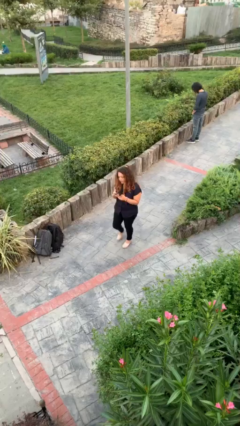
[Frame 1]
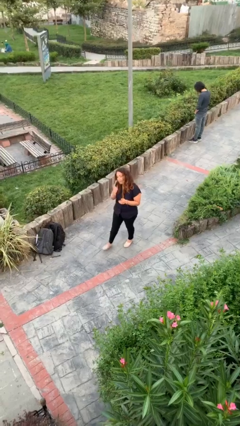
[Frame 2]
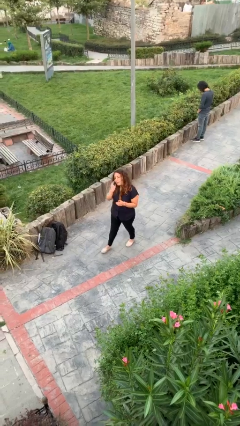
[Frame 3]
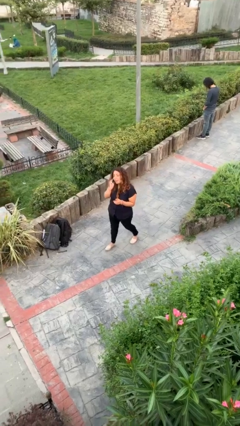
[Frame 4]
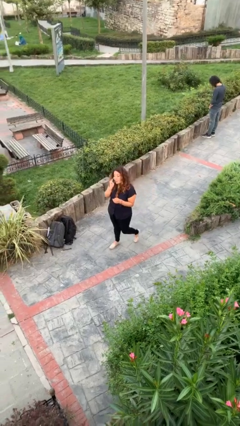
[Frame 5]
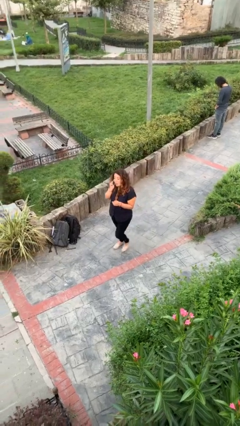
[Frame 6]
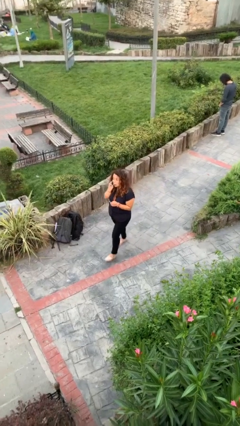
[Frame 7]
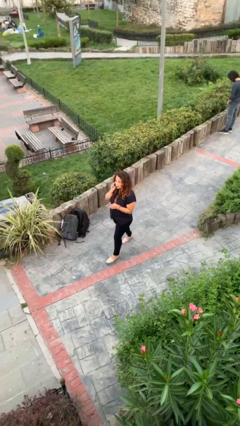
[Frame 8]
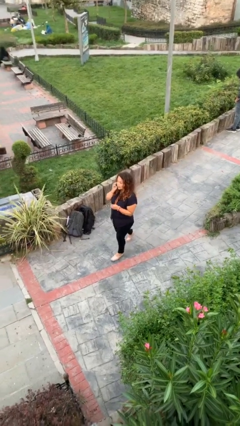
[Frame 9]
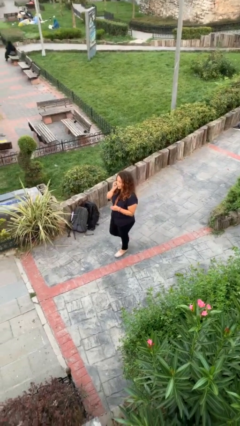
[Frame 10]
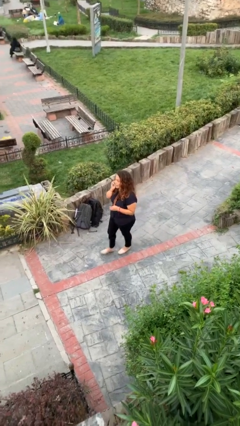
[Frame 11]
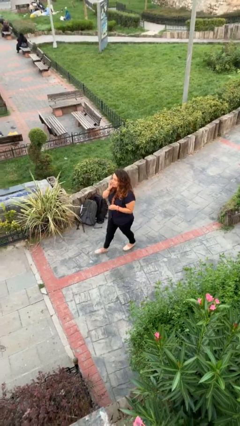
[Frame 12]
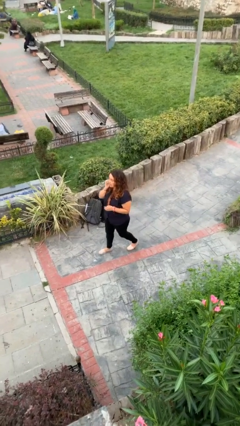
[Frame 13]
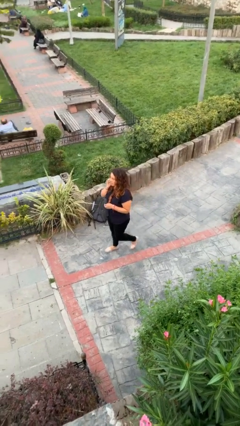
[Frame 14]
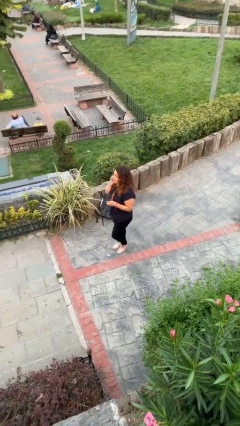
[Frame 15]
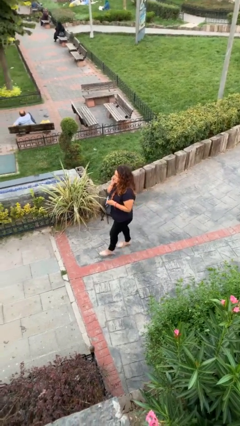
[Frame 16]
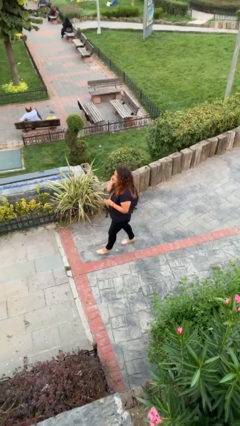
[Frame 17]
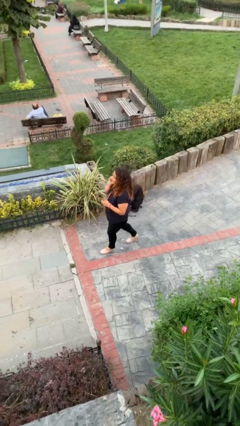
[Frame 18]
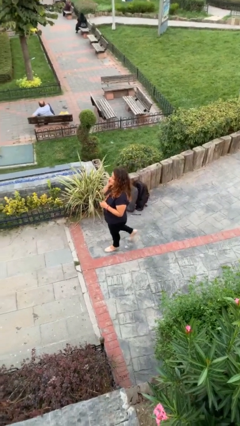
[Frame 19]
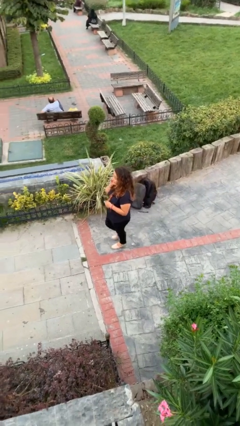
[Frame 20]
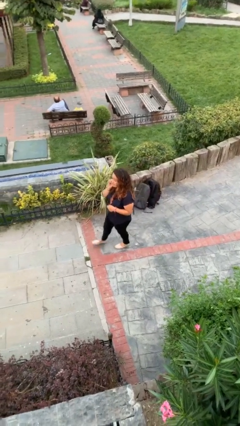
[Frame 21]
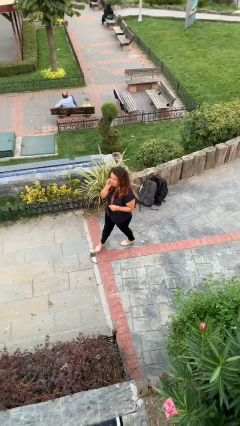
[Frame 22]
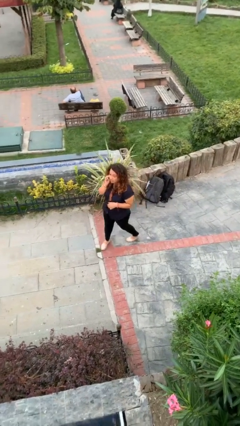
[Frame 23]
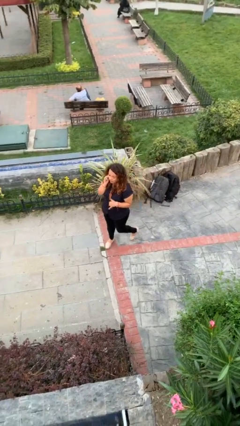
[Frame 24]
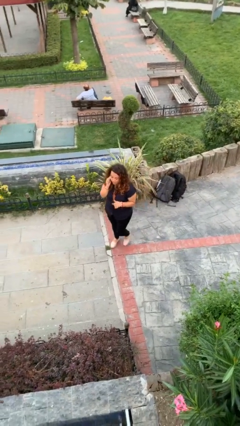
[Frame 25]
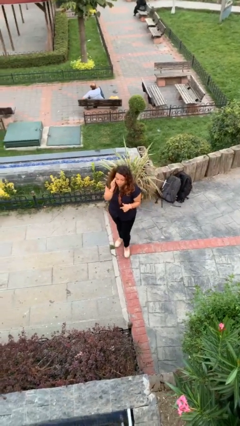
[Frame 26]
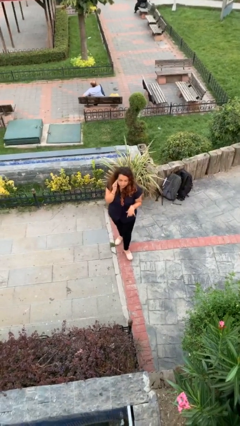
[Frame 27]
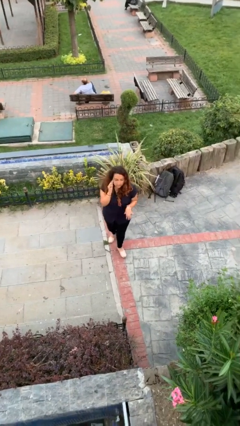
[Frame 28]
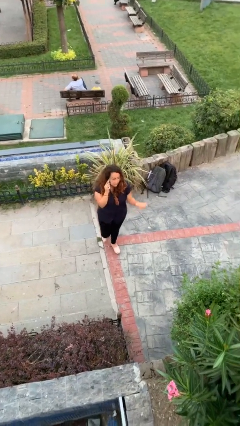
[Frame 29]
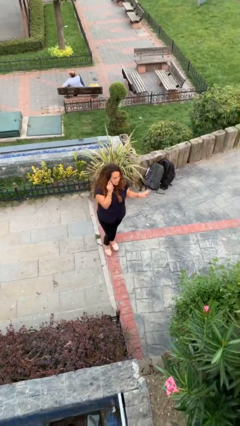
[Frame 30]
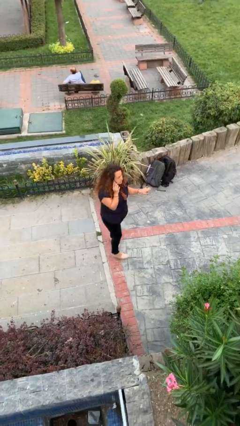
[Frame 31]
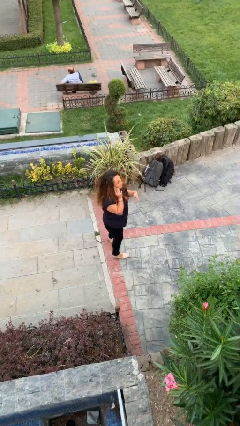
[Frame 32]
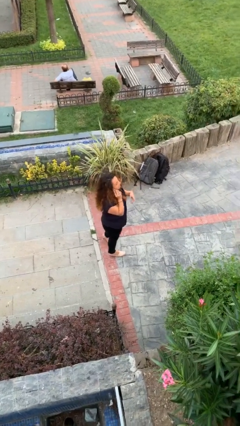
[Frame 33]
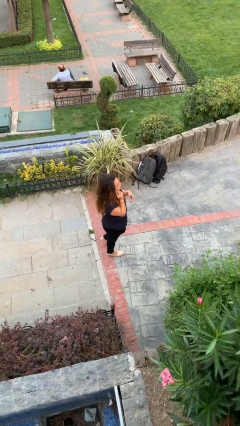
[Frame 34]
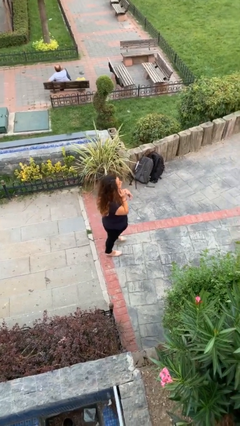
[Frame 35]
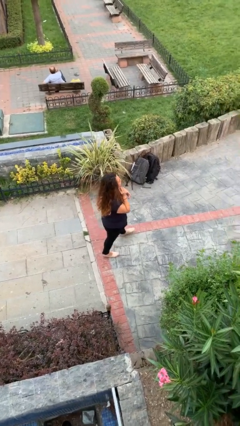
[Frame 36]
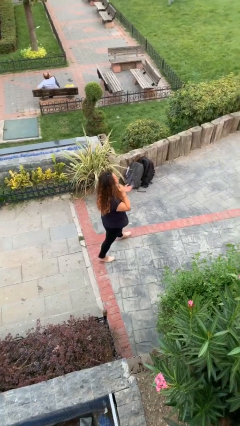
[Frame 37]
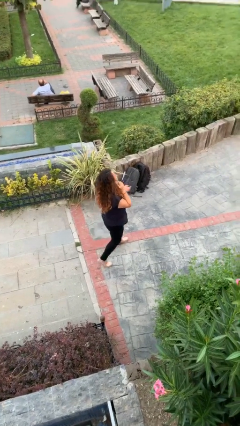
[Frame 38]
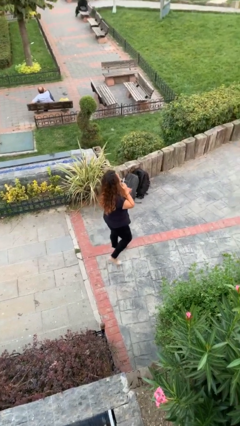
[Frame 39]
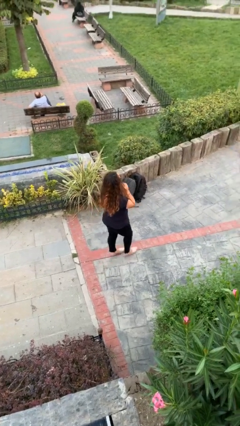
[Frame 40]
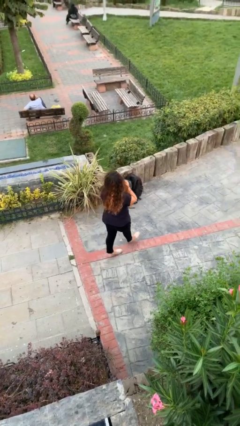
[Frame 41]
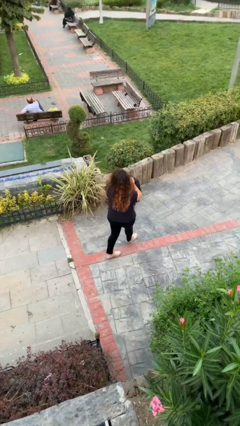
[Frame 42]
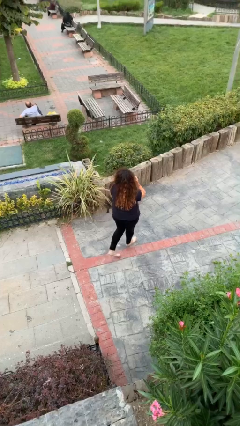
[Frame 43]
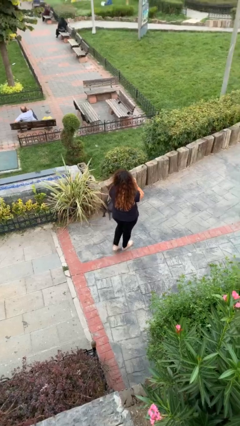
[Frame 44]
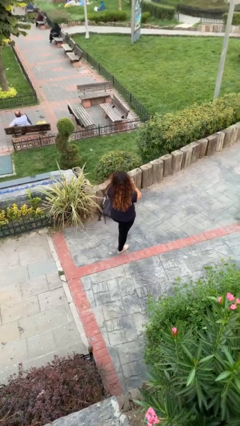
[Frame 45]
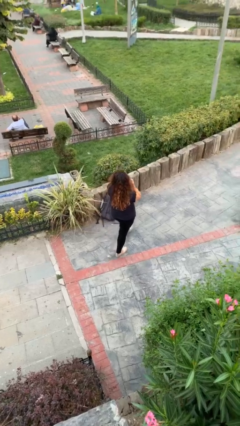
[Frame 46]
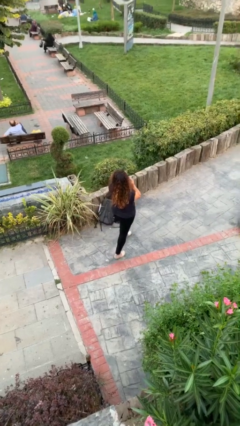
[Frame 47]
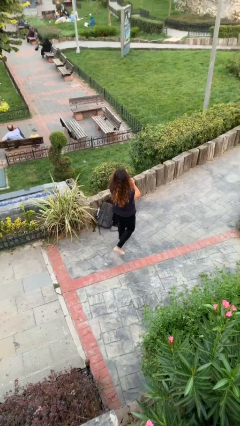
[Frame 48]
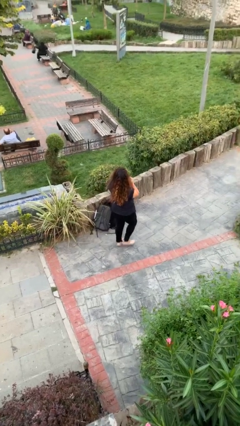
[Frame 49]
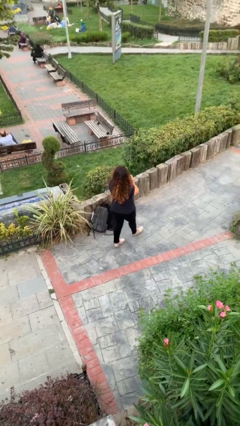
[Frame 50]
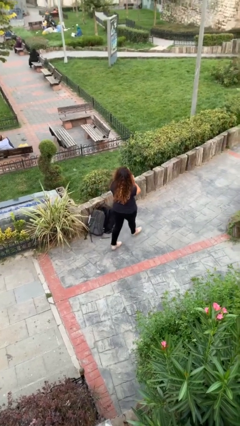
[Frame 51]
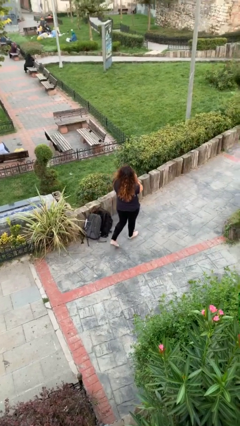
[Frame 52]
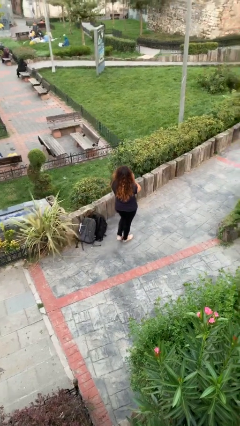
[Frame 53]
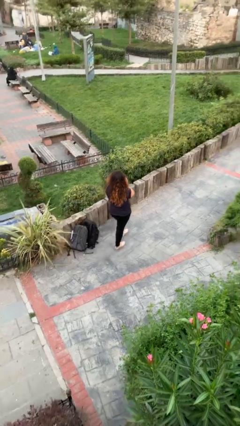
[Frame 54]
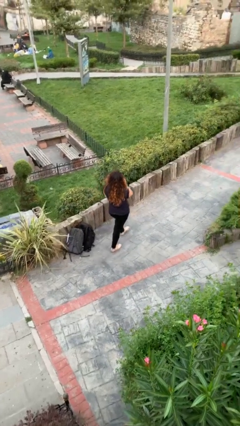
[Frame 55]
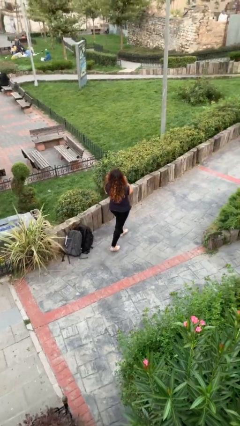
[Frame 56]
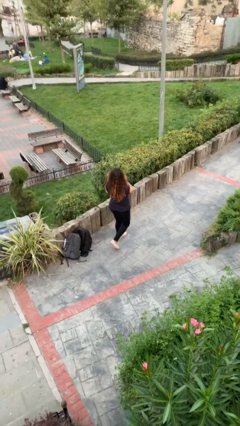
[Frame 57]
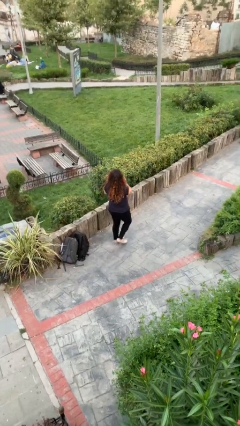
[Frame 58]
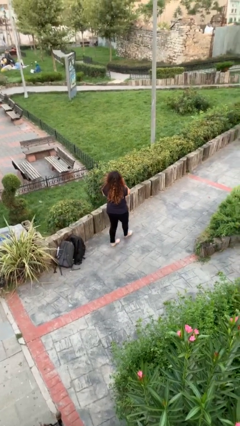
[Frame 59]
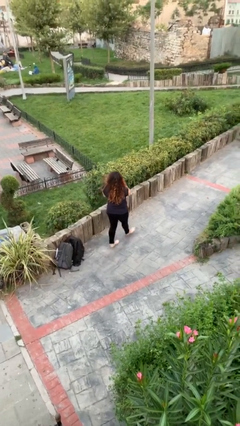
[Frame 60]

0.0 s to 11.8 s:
person talks on phone

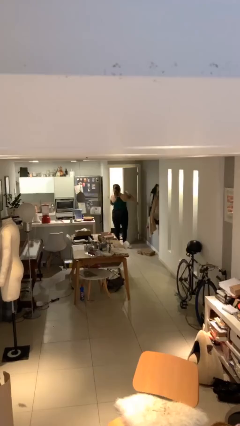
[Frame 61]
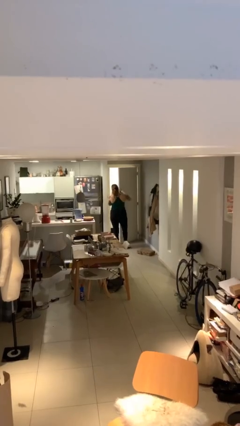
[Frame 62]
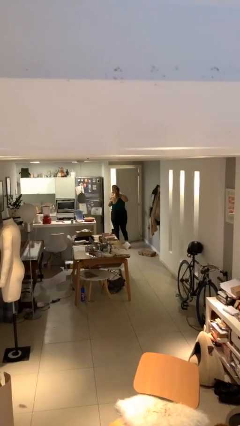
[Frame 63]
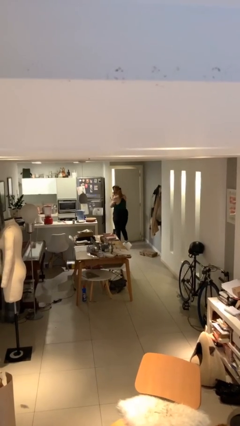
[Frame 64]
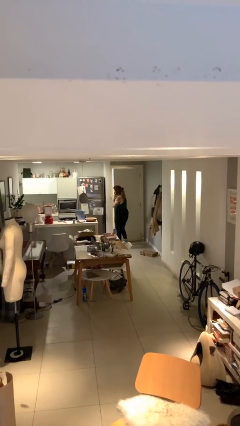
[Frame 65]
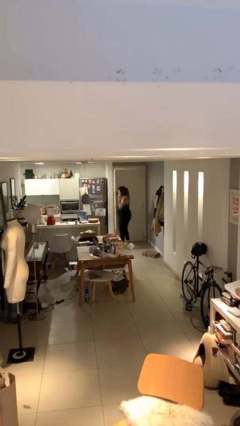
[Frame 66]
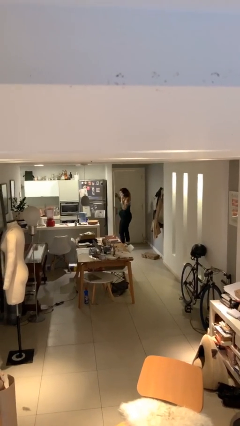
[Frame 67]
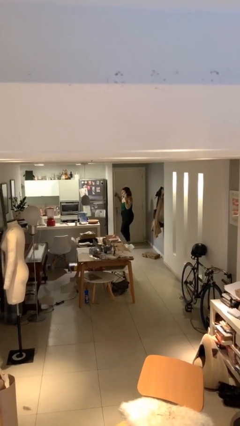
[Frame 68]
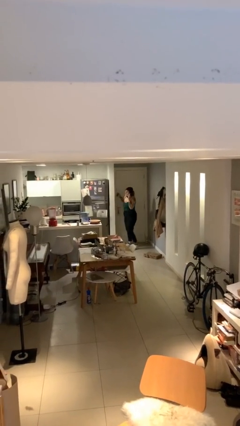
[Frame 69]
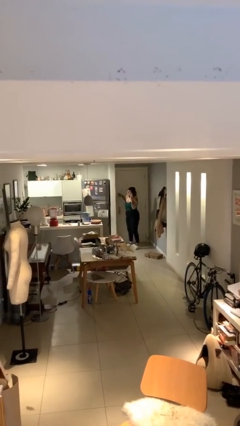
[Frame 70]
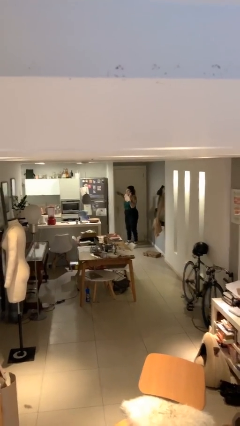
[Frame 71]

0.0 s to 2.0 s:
person closes facility door

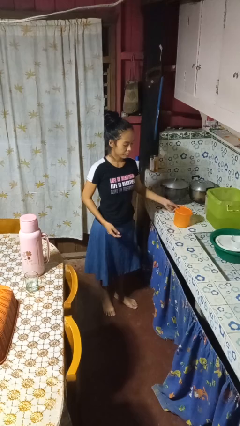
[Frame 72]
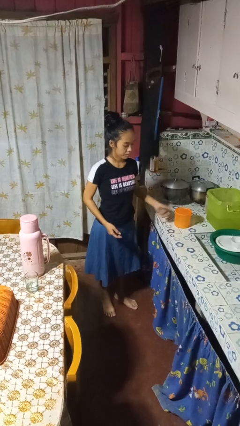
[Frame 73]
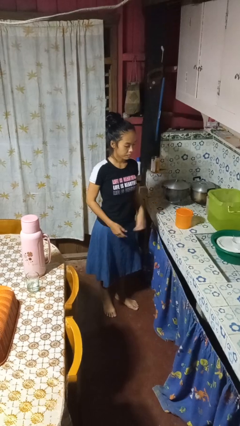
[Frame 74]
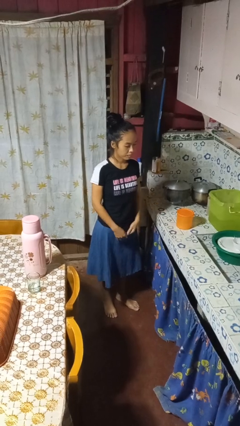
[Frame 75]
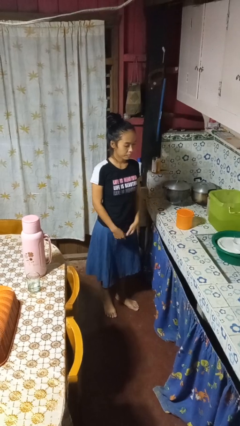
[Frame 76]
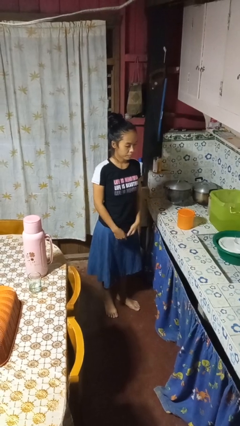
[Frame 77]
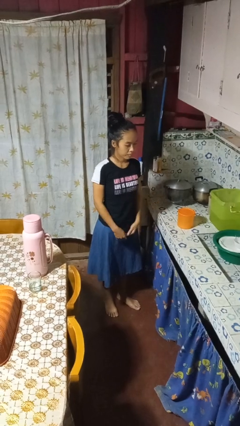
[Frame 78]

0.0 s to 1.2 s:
person puts down object on countertop

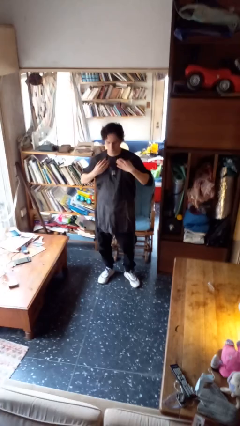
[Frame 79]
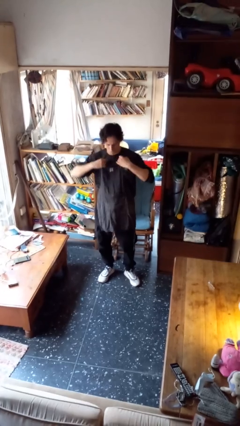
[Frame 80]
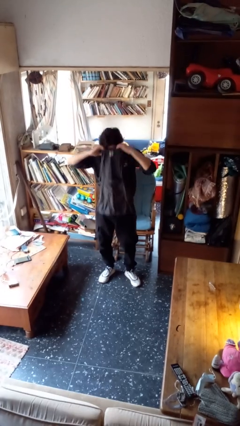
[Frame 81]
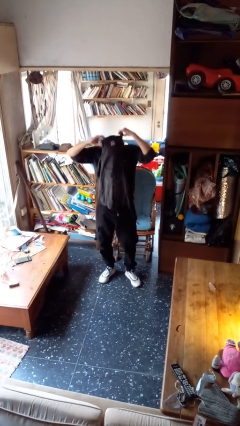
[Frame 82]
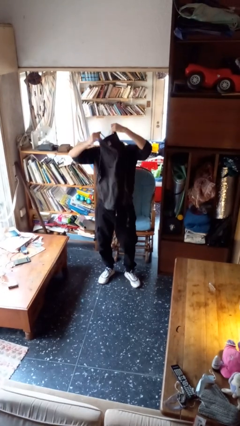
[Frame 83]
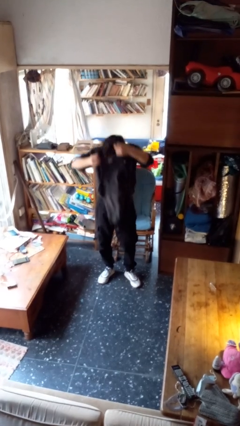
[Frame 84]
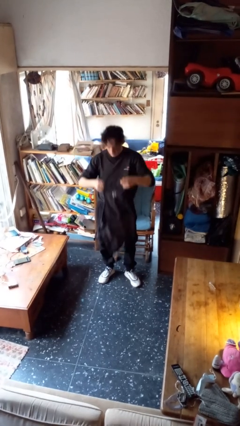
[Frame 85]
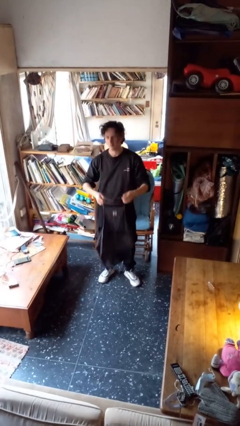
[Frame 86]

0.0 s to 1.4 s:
person takes off apron

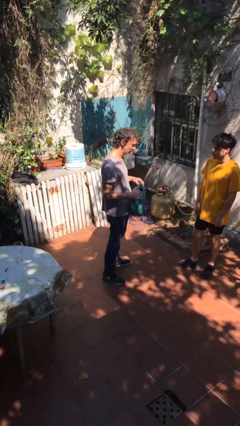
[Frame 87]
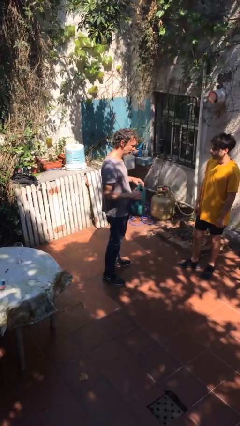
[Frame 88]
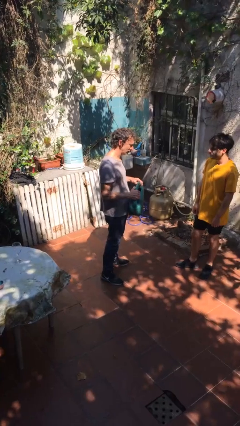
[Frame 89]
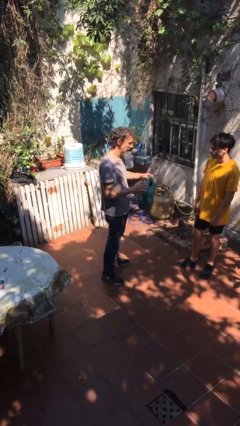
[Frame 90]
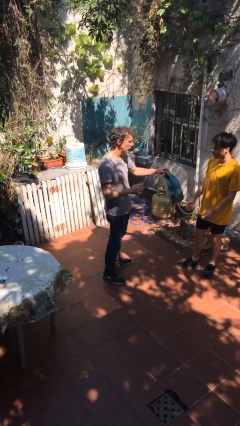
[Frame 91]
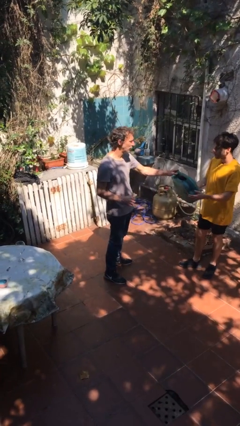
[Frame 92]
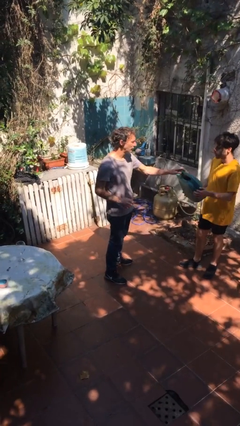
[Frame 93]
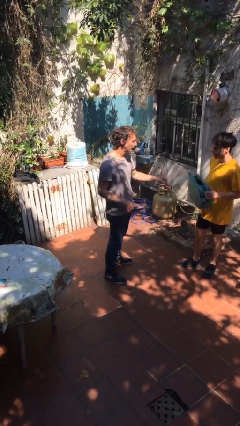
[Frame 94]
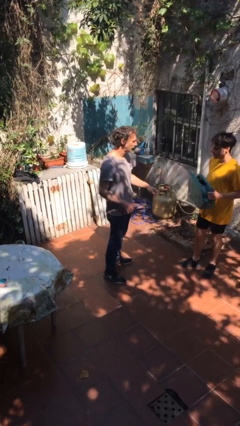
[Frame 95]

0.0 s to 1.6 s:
person transfers object to person
